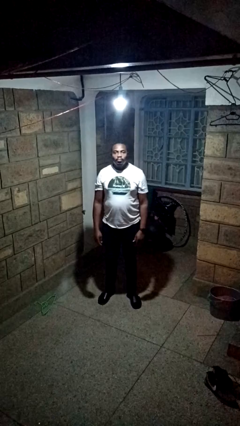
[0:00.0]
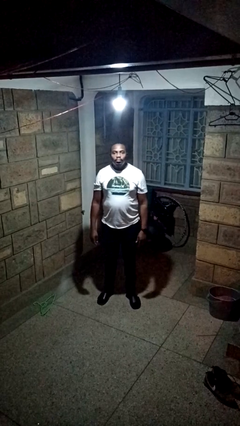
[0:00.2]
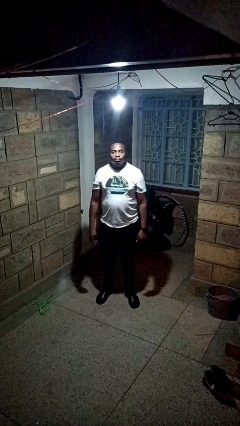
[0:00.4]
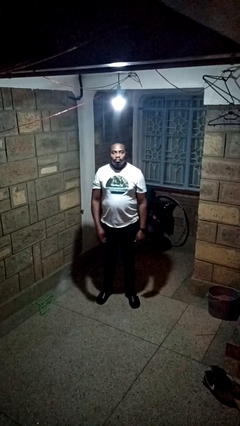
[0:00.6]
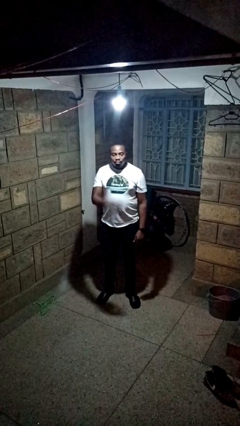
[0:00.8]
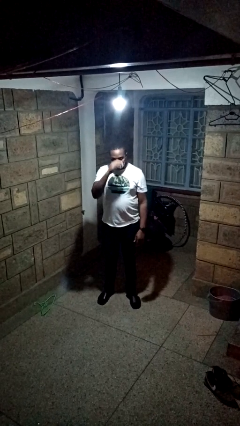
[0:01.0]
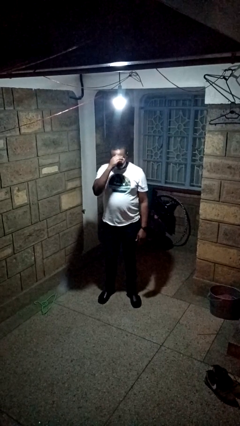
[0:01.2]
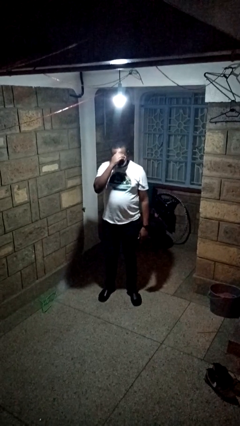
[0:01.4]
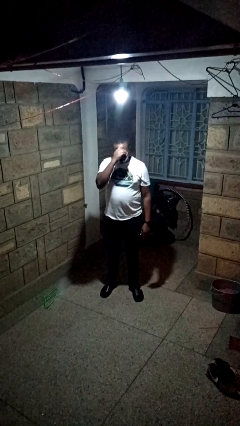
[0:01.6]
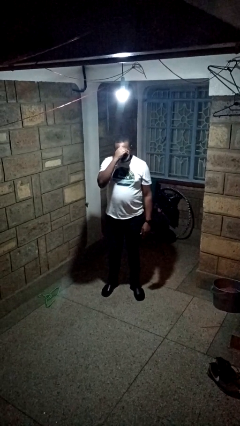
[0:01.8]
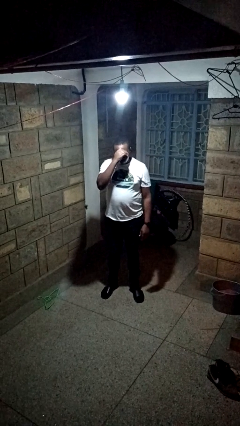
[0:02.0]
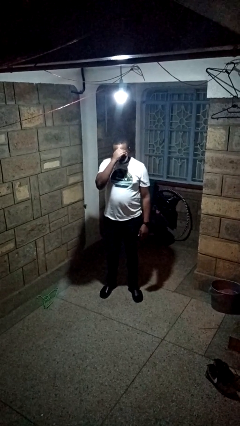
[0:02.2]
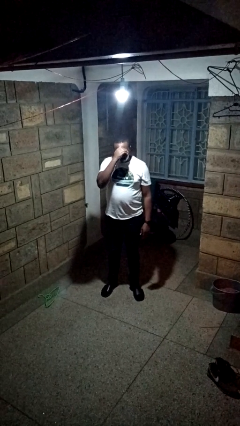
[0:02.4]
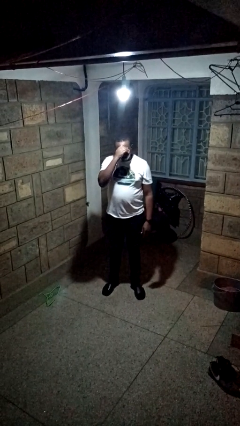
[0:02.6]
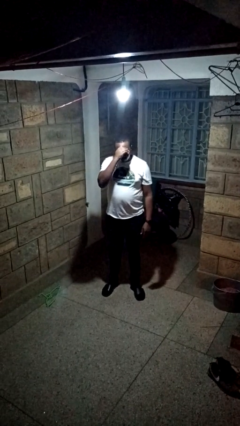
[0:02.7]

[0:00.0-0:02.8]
person shades eyes

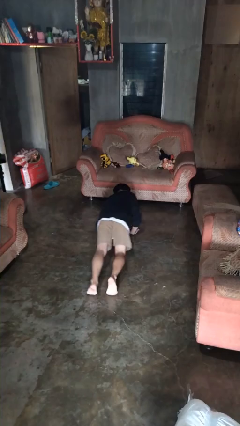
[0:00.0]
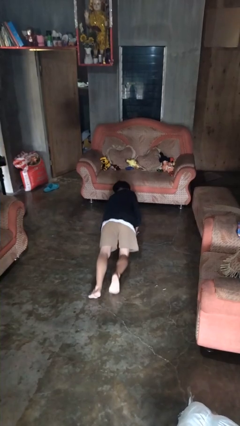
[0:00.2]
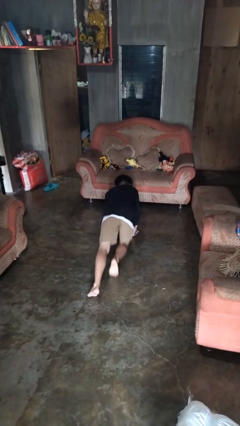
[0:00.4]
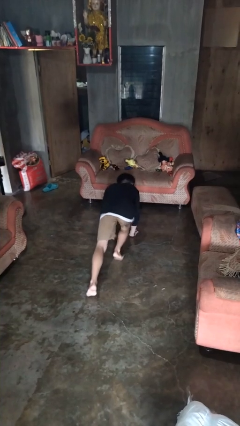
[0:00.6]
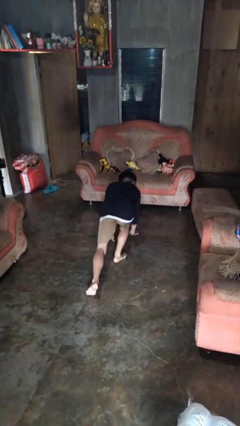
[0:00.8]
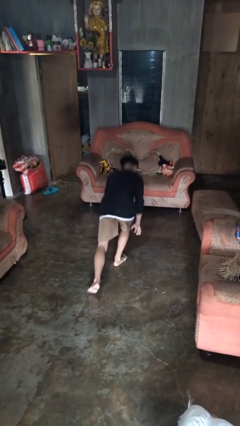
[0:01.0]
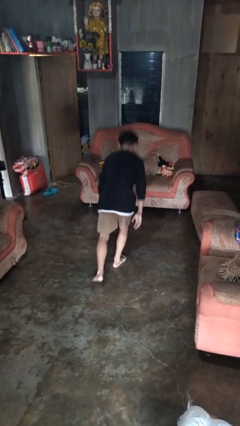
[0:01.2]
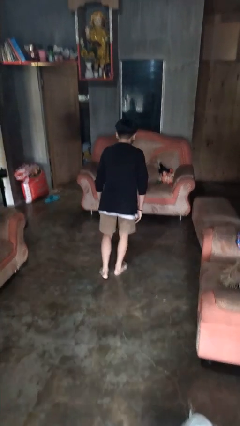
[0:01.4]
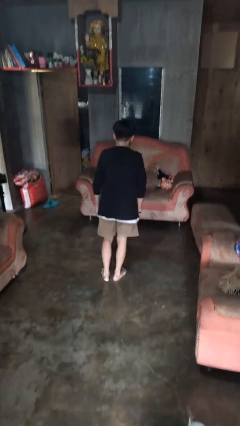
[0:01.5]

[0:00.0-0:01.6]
person stands up from floor

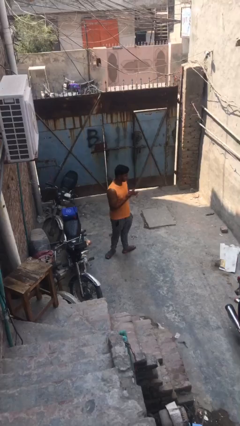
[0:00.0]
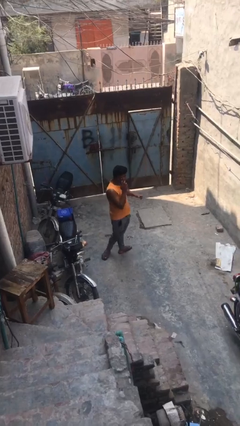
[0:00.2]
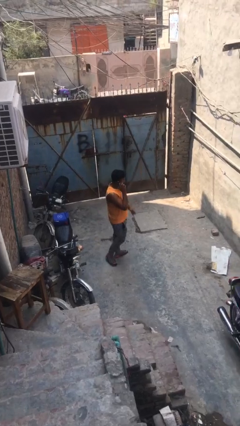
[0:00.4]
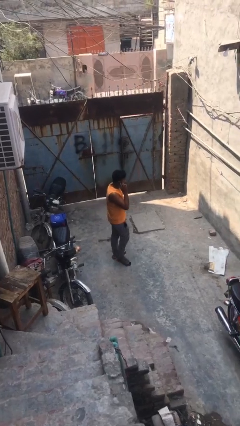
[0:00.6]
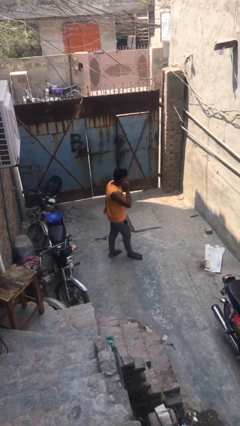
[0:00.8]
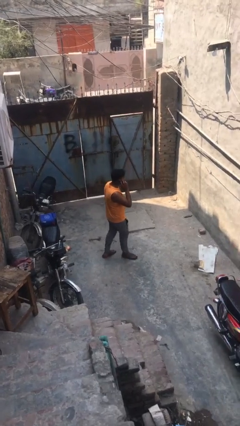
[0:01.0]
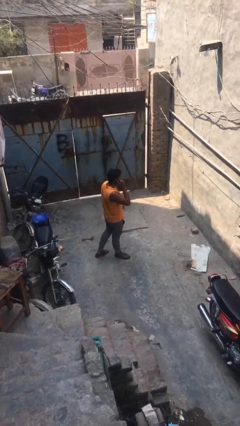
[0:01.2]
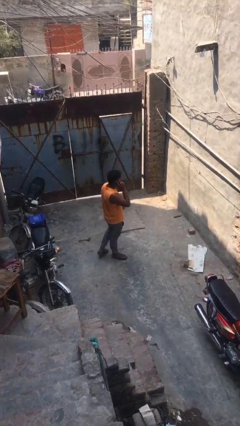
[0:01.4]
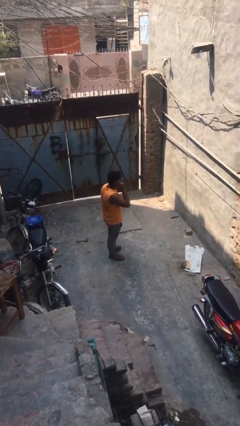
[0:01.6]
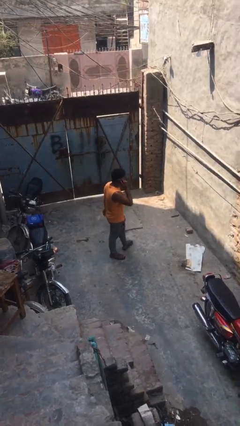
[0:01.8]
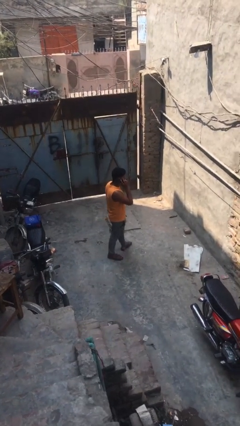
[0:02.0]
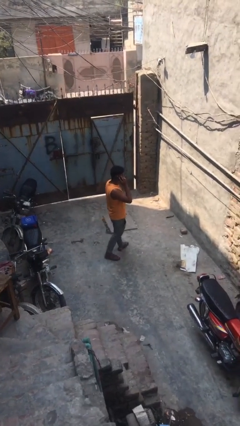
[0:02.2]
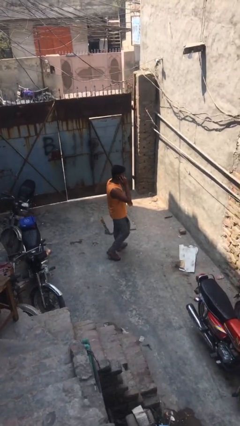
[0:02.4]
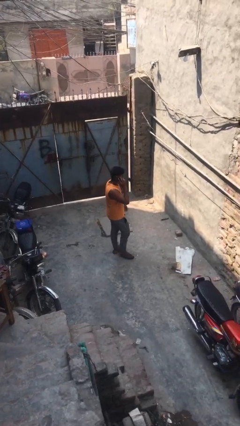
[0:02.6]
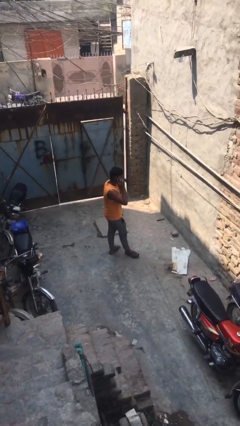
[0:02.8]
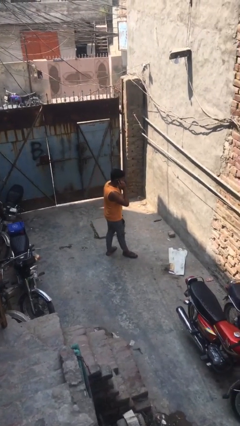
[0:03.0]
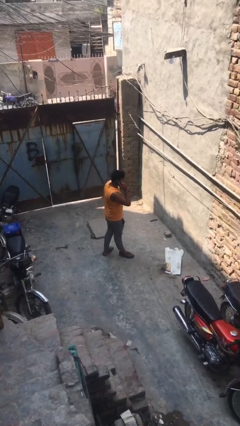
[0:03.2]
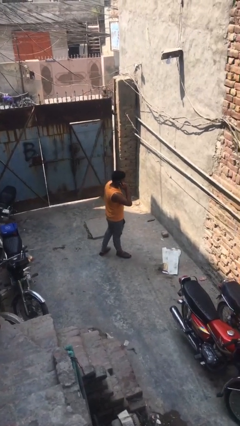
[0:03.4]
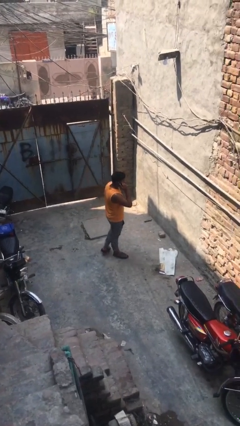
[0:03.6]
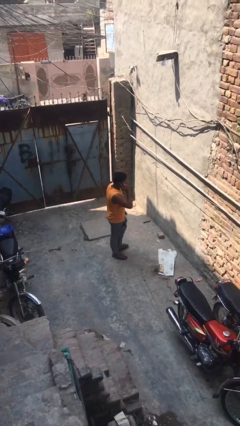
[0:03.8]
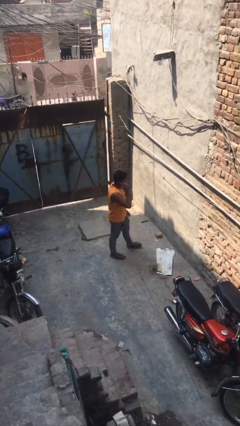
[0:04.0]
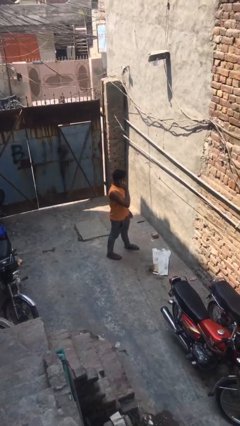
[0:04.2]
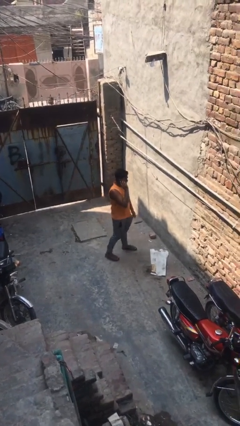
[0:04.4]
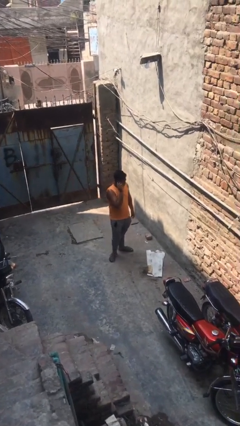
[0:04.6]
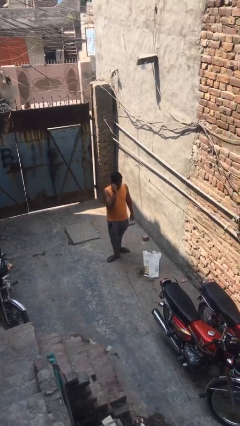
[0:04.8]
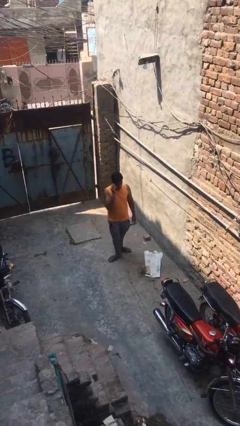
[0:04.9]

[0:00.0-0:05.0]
person talks on phone

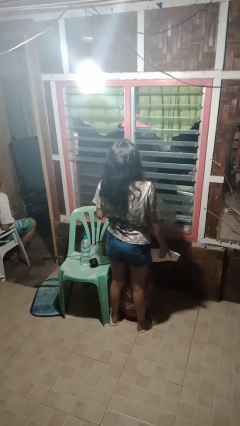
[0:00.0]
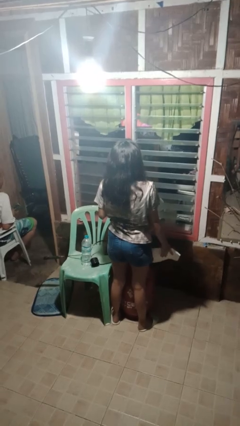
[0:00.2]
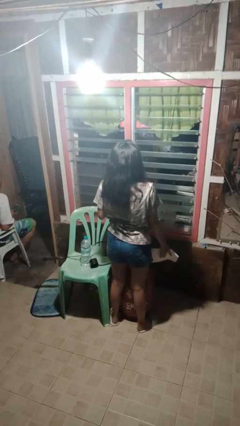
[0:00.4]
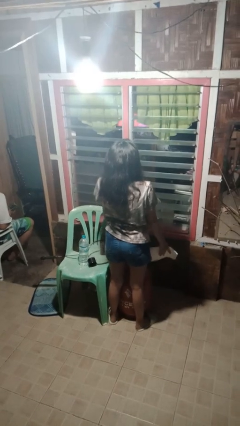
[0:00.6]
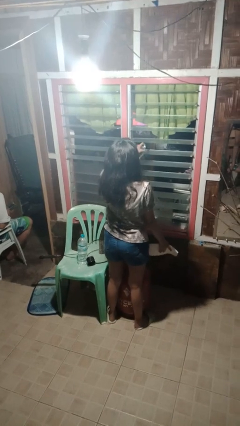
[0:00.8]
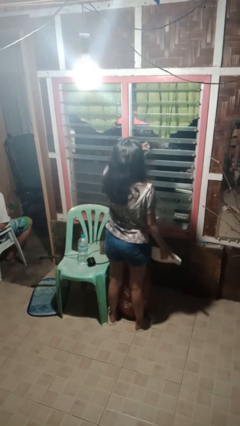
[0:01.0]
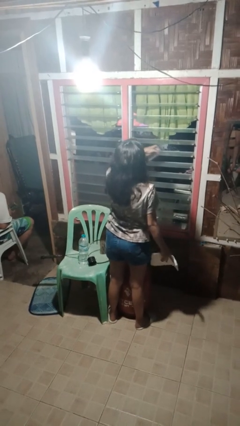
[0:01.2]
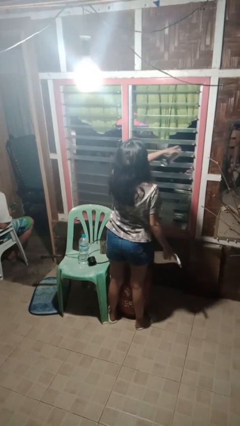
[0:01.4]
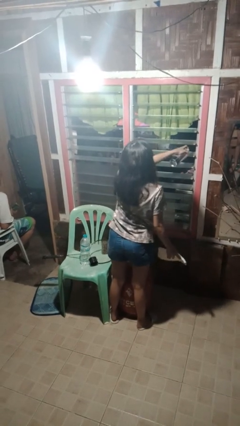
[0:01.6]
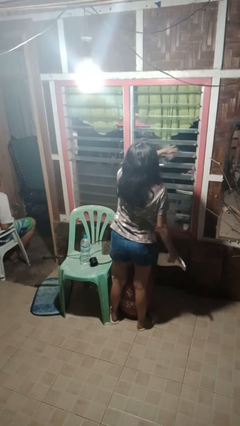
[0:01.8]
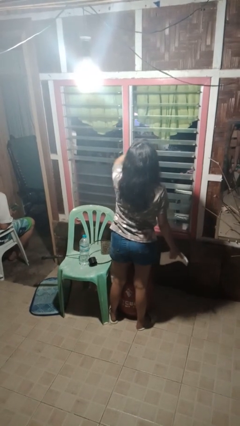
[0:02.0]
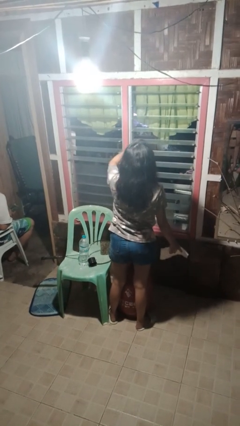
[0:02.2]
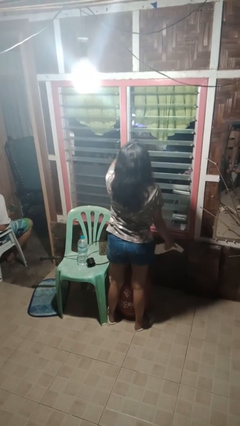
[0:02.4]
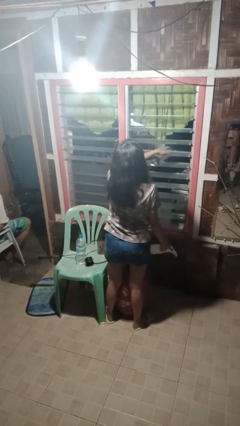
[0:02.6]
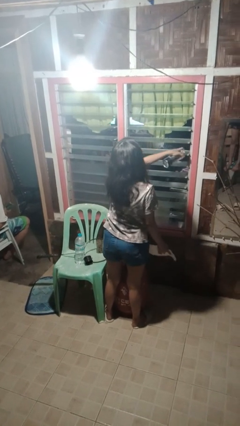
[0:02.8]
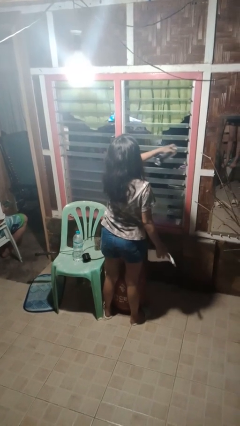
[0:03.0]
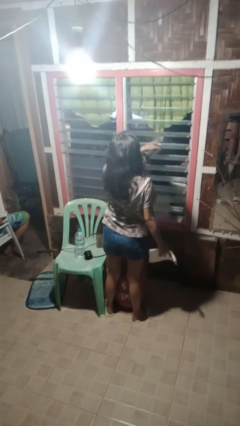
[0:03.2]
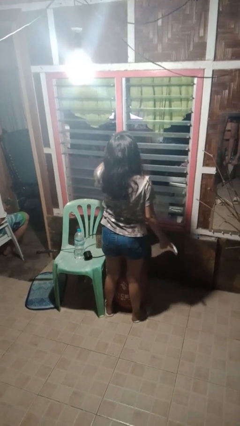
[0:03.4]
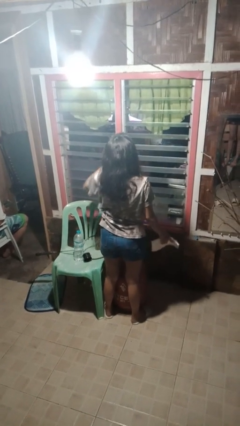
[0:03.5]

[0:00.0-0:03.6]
person sprays from bottle

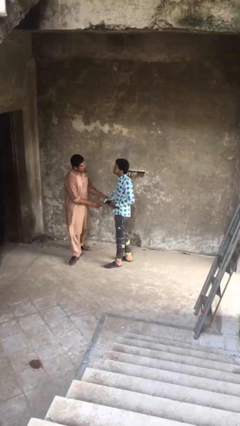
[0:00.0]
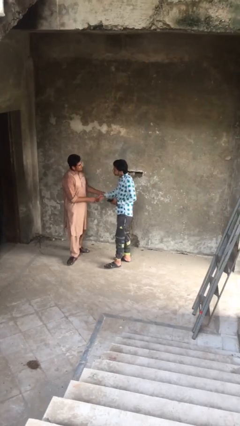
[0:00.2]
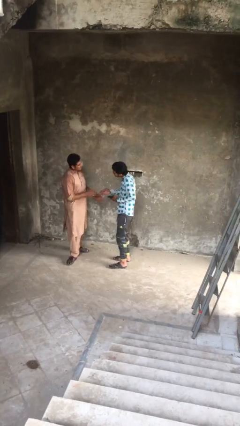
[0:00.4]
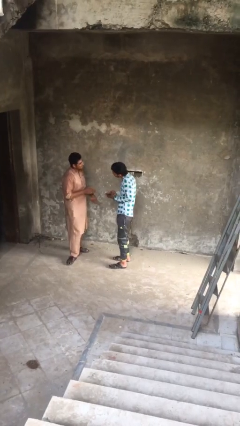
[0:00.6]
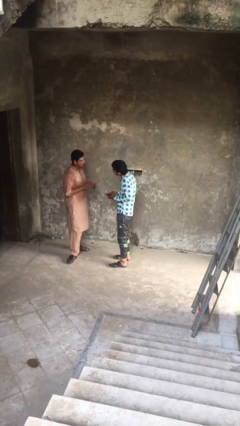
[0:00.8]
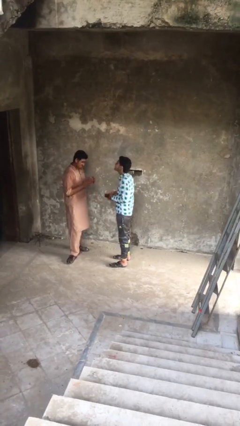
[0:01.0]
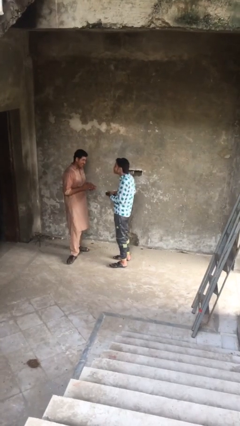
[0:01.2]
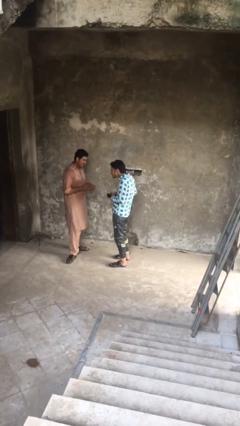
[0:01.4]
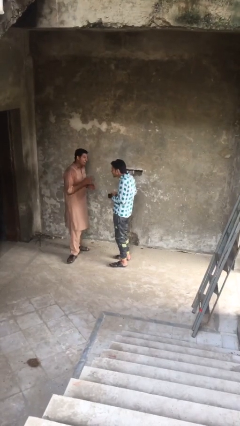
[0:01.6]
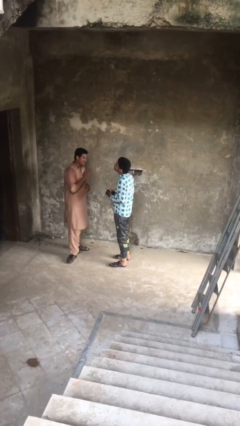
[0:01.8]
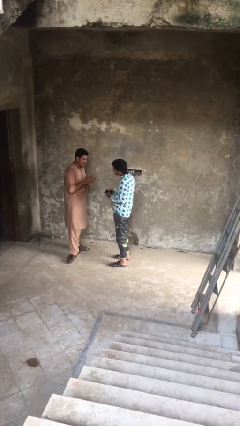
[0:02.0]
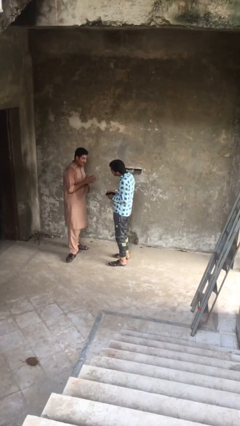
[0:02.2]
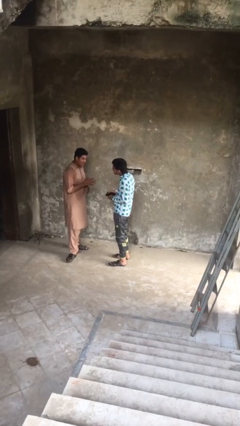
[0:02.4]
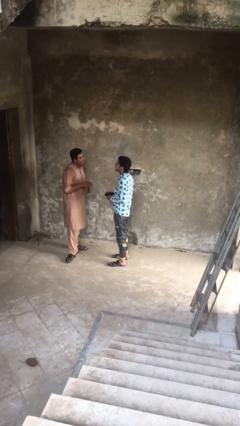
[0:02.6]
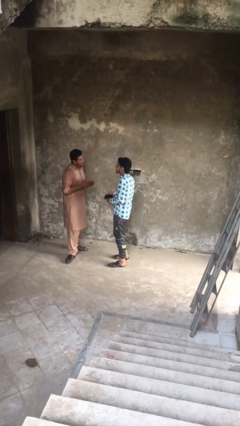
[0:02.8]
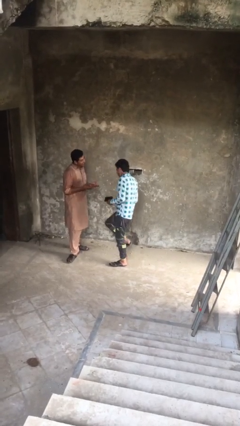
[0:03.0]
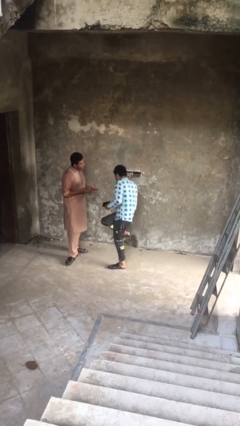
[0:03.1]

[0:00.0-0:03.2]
person talks to person

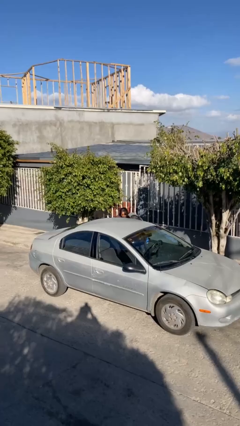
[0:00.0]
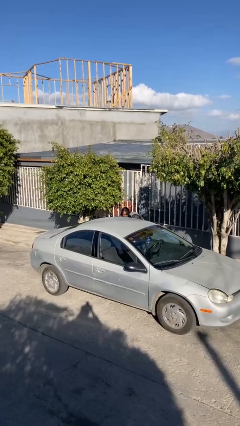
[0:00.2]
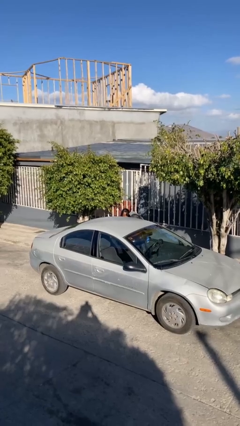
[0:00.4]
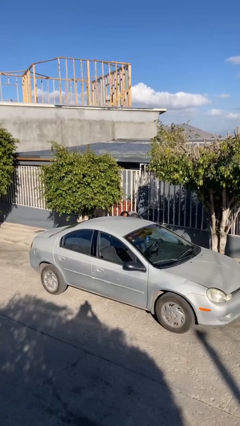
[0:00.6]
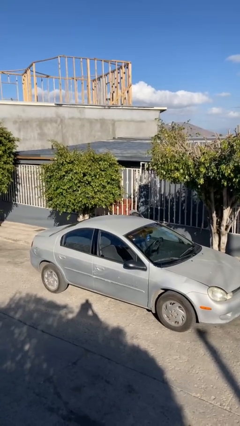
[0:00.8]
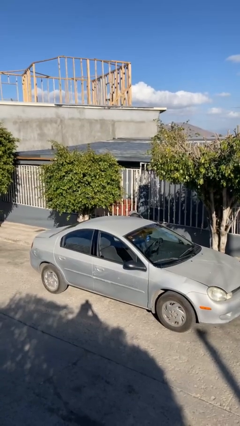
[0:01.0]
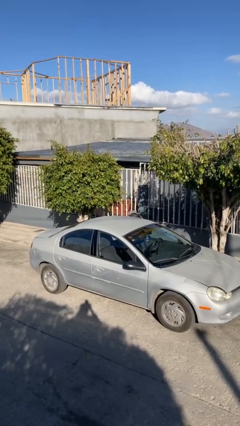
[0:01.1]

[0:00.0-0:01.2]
person enters car
